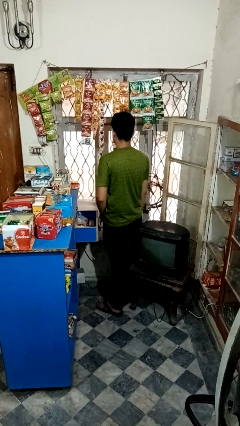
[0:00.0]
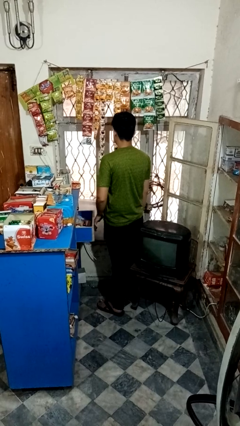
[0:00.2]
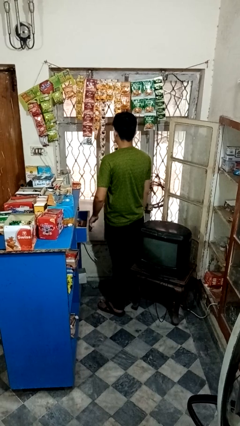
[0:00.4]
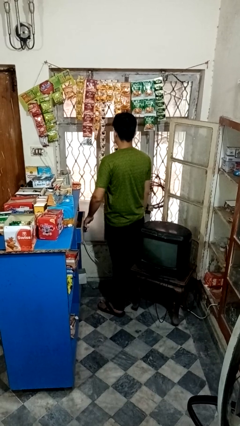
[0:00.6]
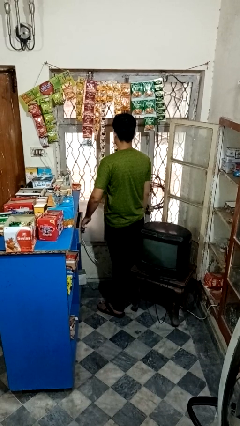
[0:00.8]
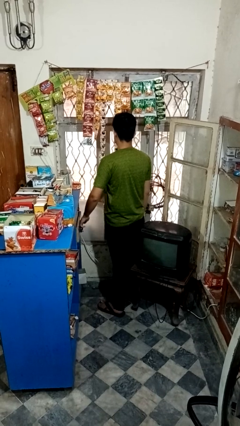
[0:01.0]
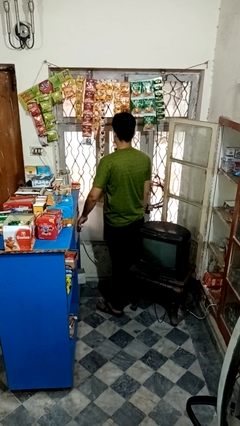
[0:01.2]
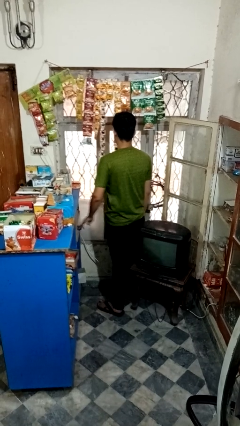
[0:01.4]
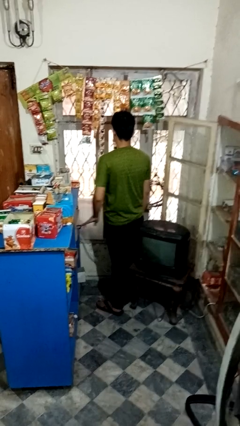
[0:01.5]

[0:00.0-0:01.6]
person closes kitchen drawer

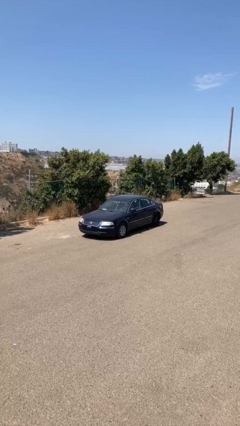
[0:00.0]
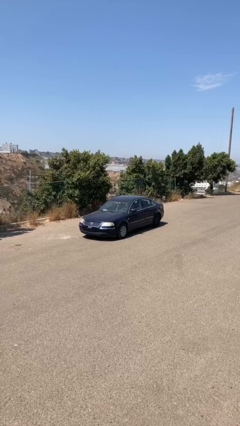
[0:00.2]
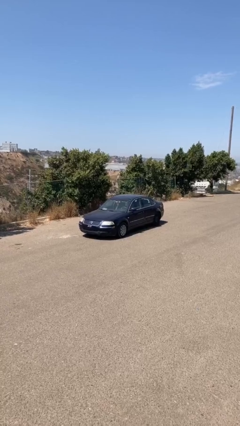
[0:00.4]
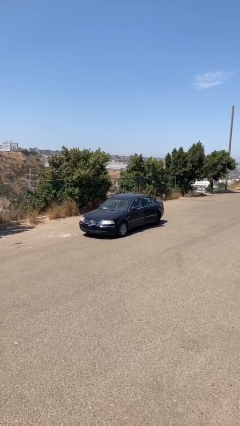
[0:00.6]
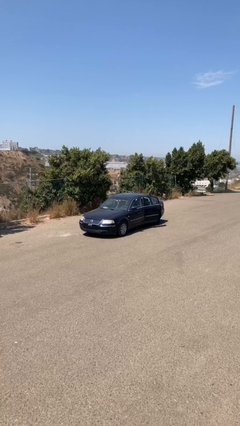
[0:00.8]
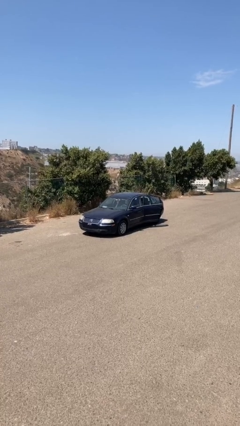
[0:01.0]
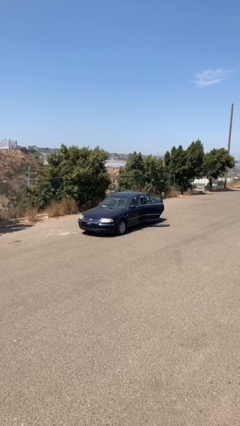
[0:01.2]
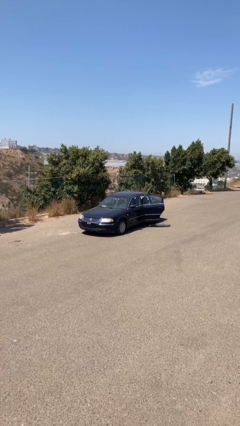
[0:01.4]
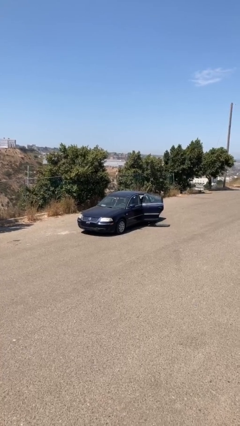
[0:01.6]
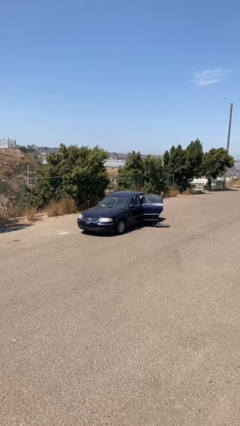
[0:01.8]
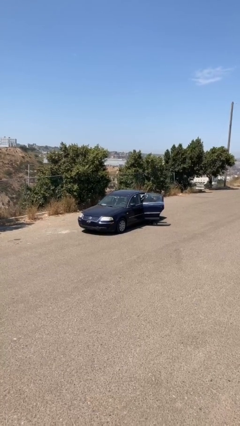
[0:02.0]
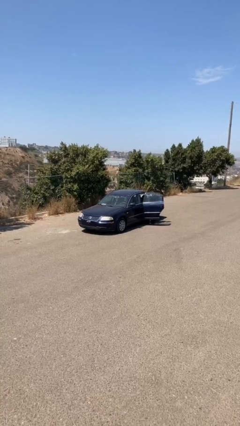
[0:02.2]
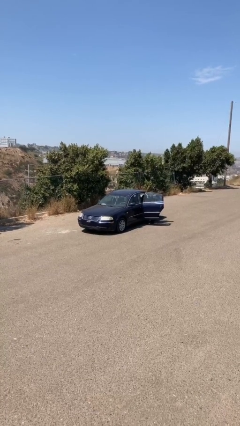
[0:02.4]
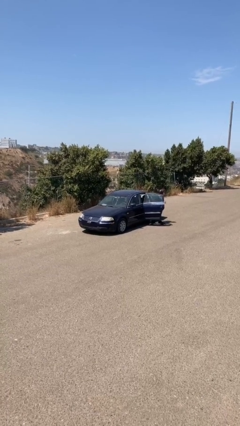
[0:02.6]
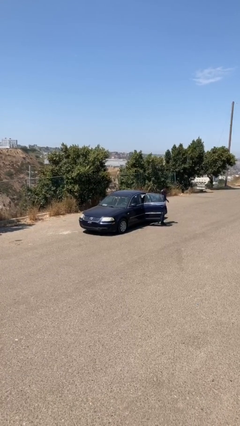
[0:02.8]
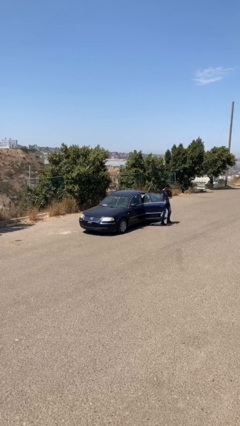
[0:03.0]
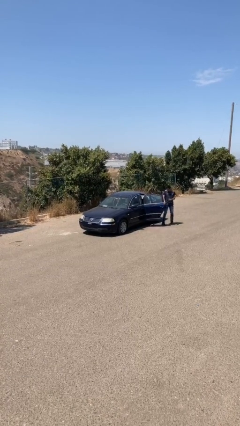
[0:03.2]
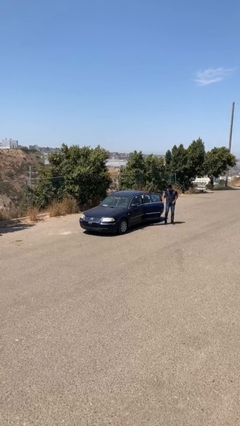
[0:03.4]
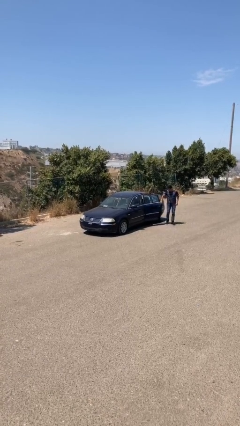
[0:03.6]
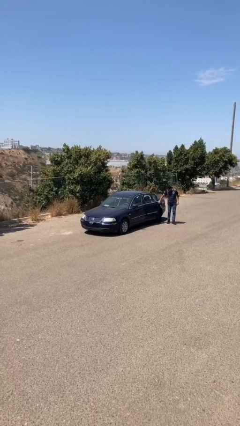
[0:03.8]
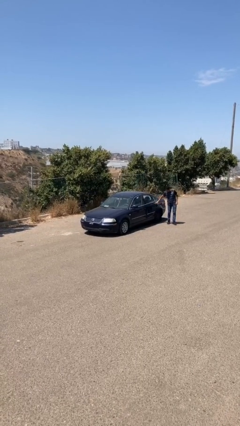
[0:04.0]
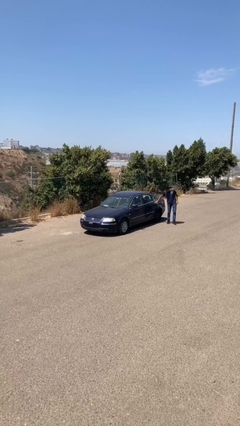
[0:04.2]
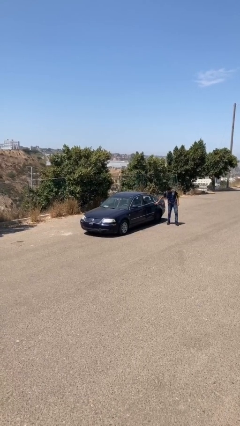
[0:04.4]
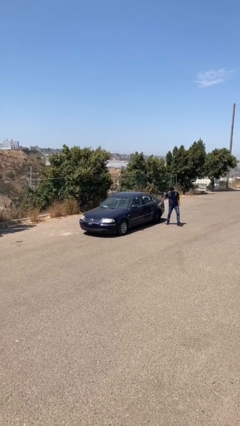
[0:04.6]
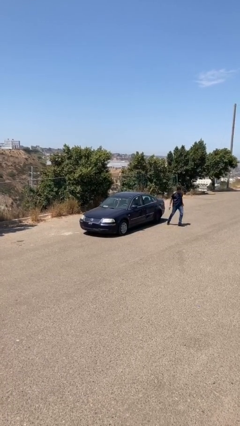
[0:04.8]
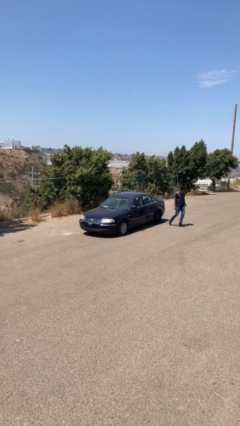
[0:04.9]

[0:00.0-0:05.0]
car drops off person

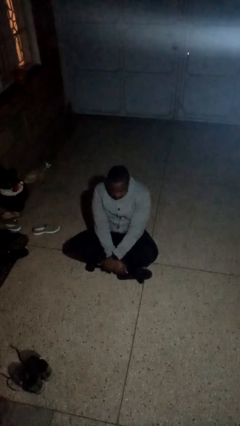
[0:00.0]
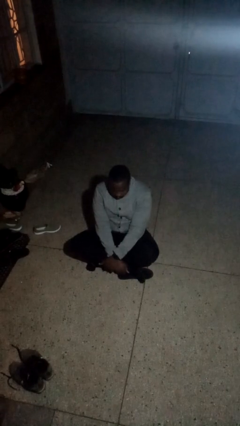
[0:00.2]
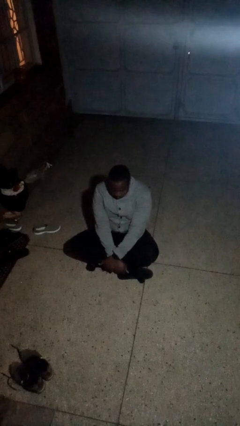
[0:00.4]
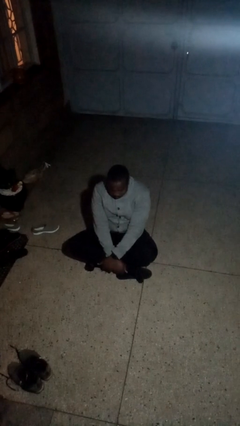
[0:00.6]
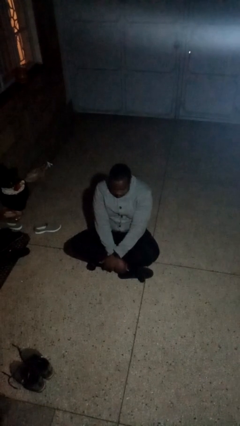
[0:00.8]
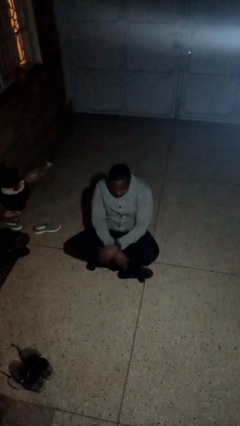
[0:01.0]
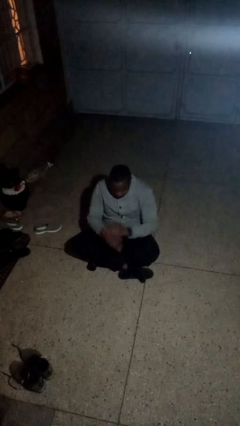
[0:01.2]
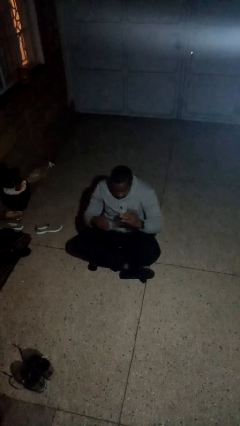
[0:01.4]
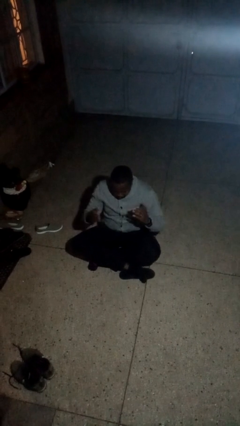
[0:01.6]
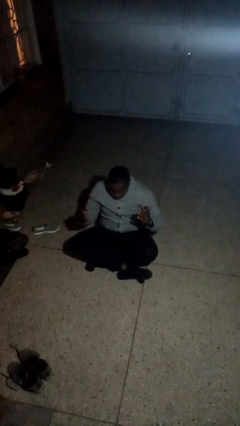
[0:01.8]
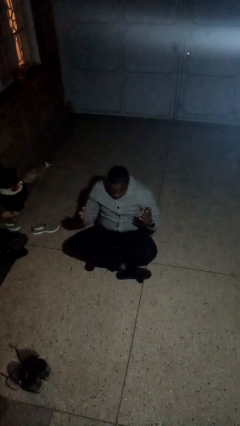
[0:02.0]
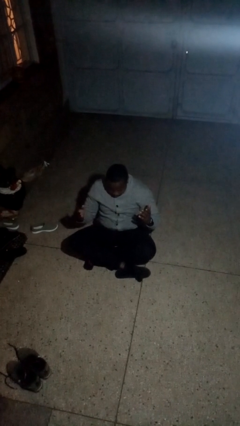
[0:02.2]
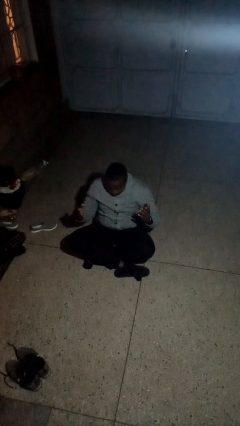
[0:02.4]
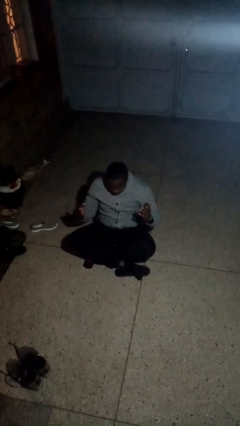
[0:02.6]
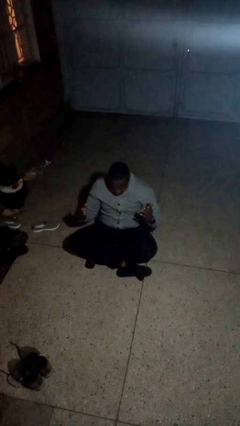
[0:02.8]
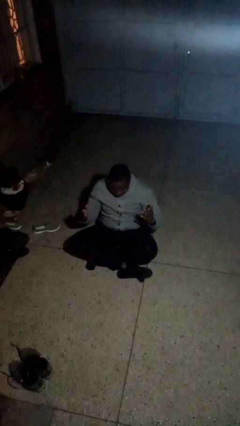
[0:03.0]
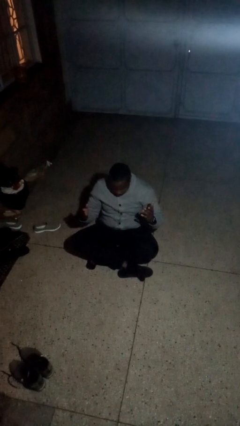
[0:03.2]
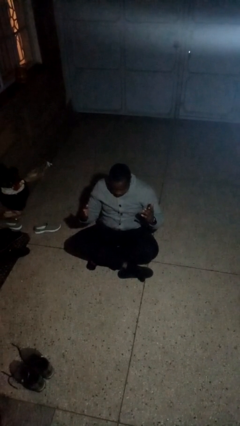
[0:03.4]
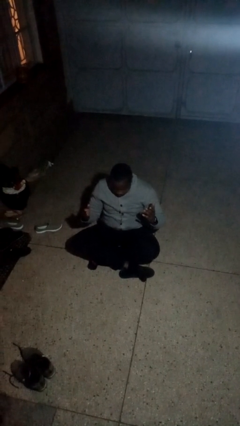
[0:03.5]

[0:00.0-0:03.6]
person prays

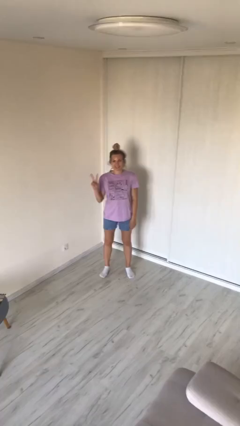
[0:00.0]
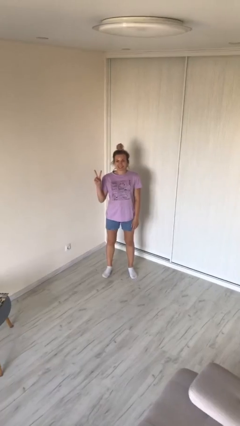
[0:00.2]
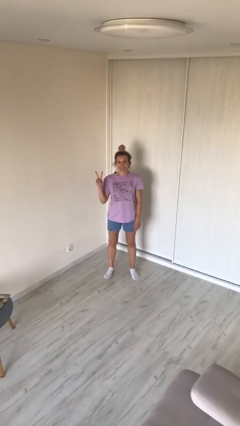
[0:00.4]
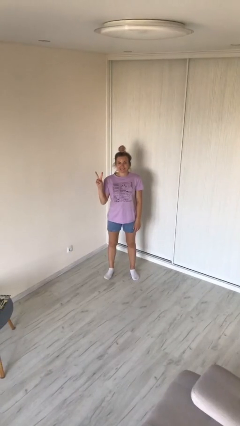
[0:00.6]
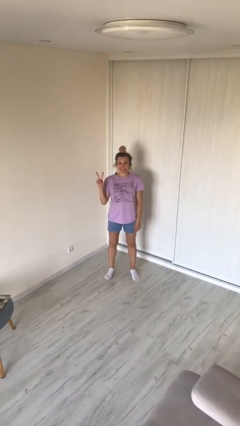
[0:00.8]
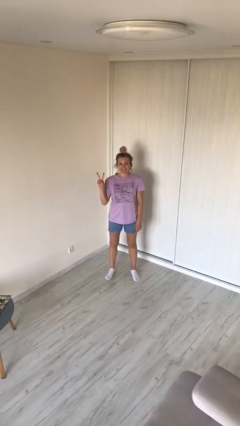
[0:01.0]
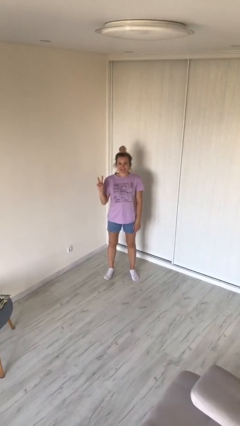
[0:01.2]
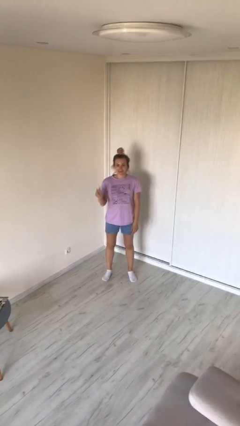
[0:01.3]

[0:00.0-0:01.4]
person gestures peace

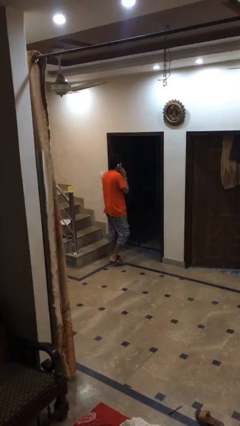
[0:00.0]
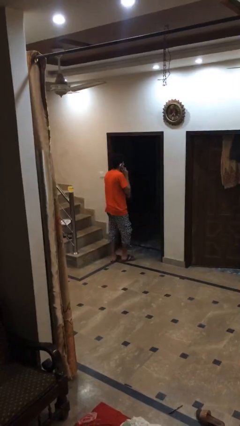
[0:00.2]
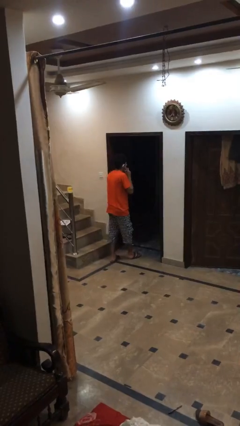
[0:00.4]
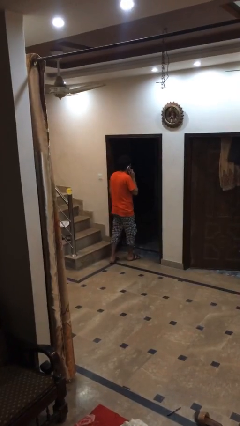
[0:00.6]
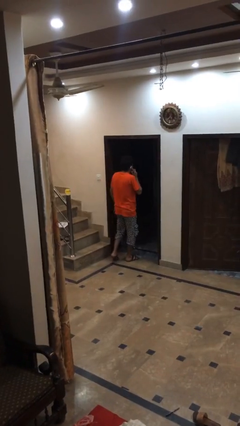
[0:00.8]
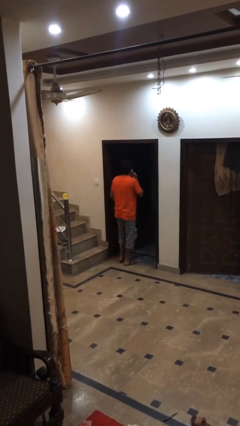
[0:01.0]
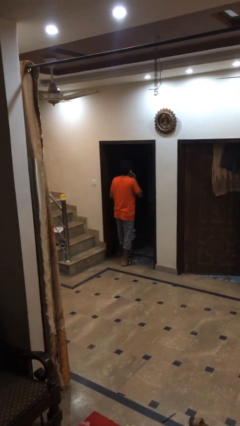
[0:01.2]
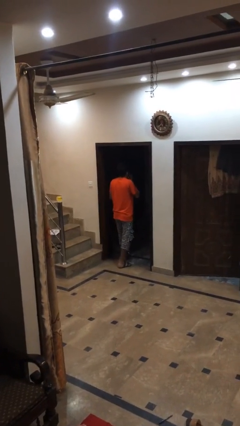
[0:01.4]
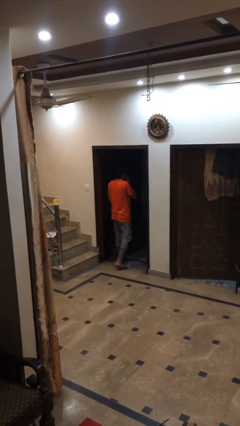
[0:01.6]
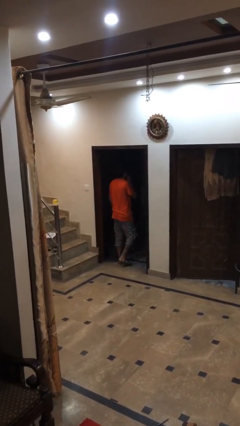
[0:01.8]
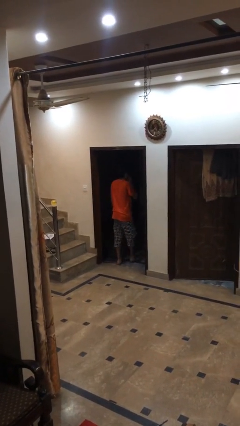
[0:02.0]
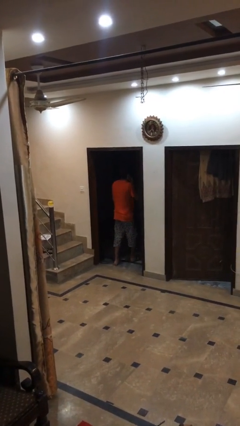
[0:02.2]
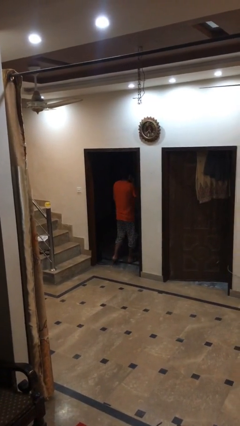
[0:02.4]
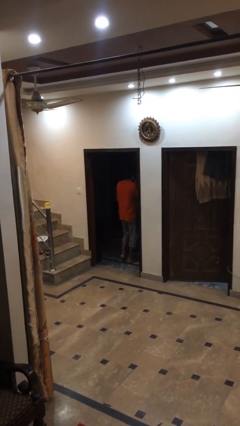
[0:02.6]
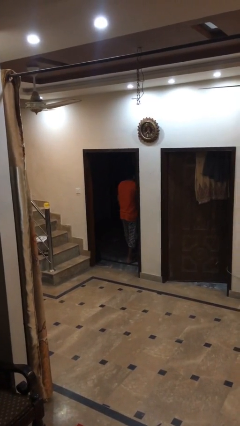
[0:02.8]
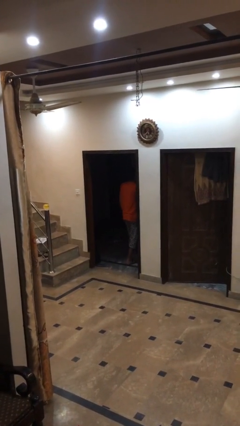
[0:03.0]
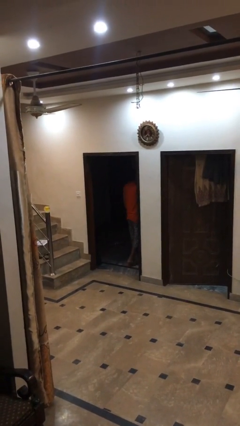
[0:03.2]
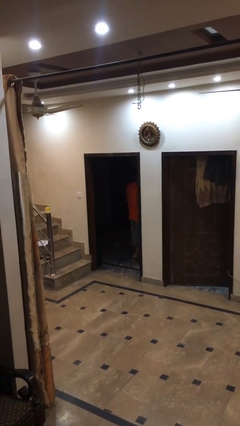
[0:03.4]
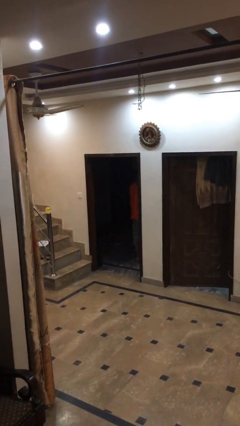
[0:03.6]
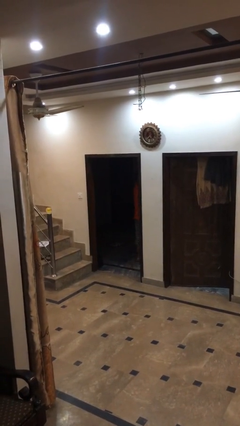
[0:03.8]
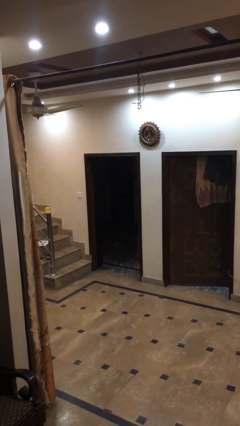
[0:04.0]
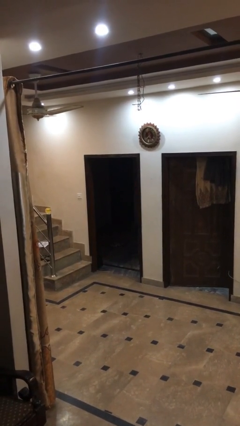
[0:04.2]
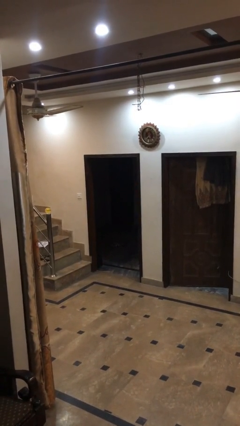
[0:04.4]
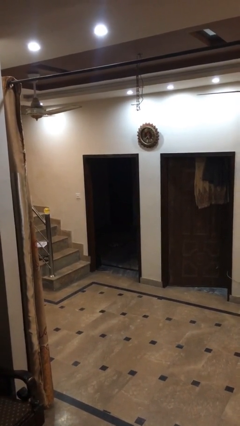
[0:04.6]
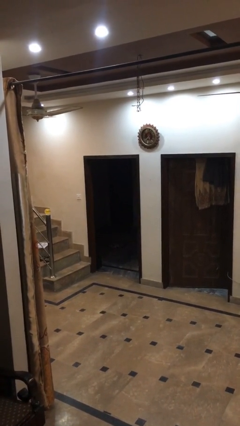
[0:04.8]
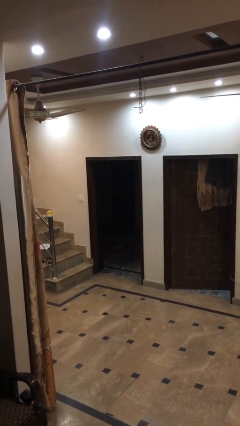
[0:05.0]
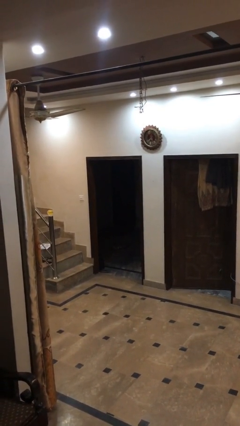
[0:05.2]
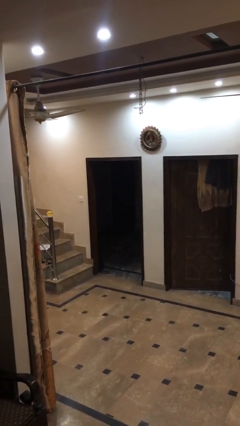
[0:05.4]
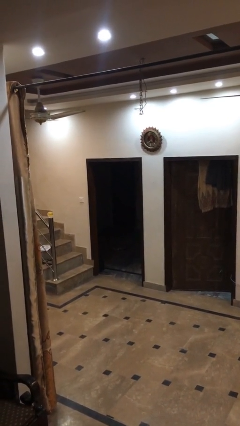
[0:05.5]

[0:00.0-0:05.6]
person exits scene through structure

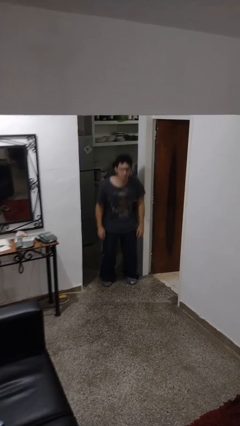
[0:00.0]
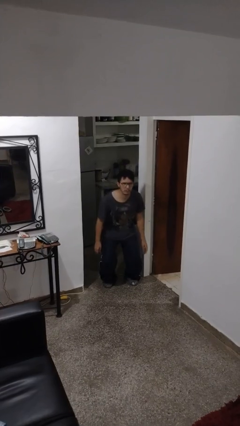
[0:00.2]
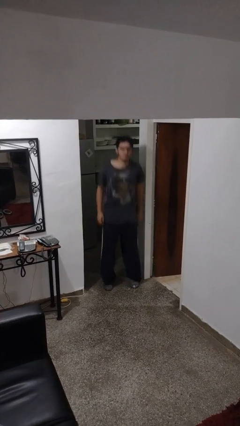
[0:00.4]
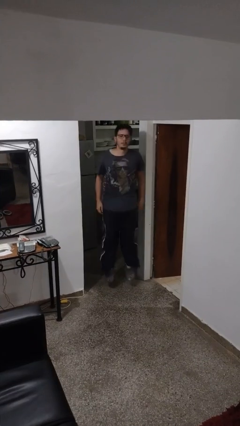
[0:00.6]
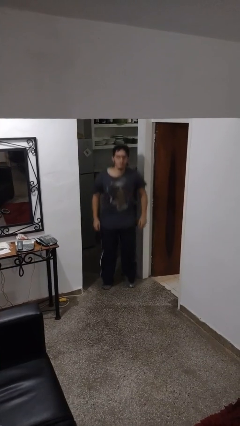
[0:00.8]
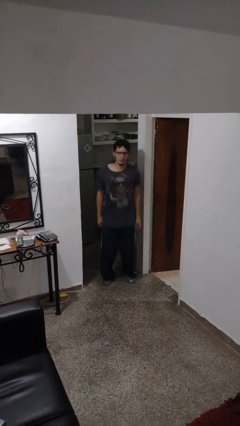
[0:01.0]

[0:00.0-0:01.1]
person jumps
